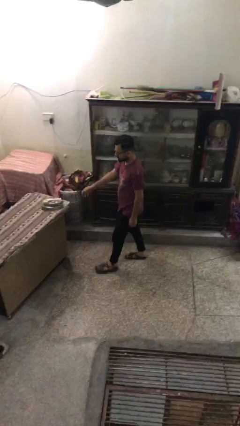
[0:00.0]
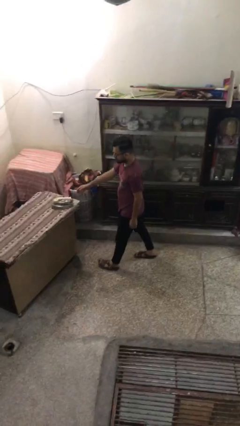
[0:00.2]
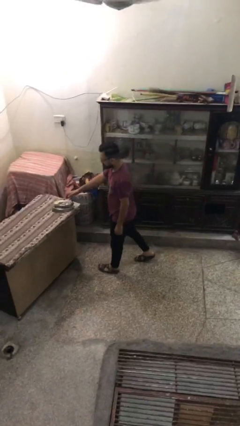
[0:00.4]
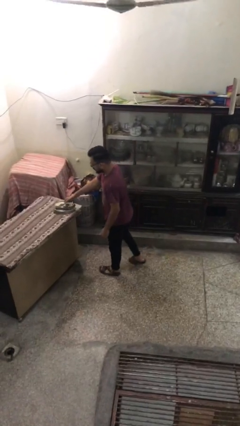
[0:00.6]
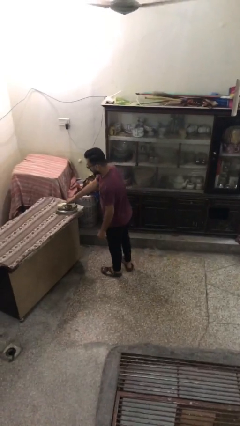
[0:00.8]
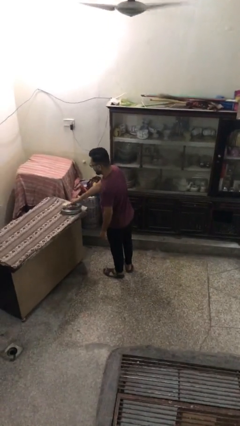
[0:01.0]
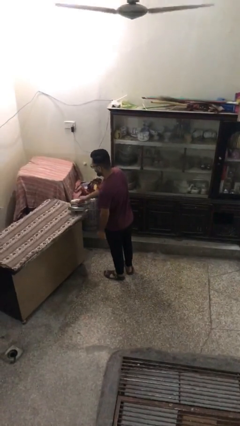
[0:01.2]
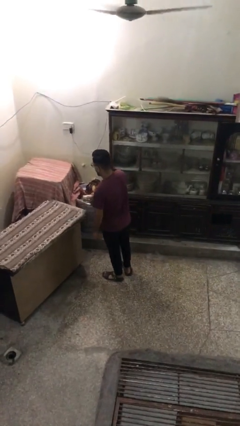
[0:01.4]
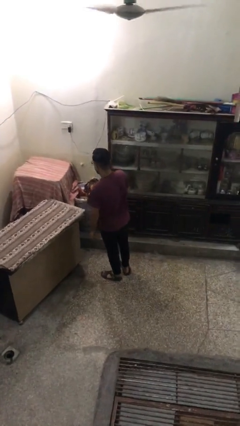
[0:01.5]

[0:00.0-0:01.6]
person picks up object from table

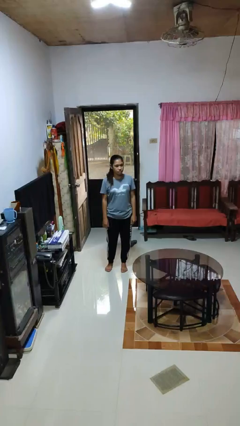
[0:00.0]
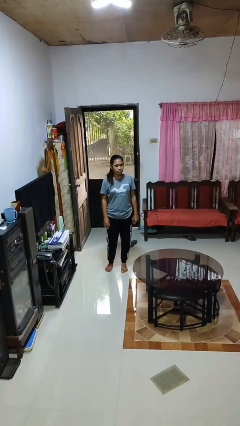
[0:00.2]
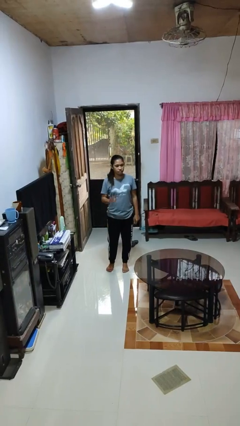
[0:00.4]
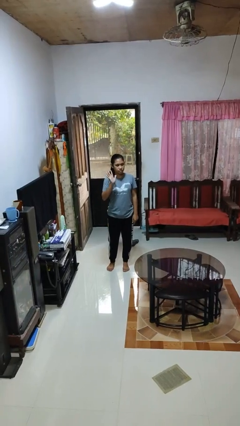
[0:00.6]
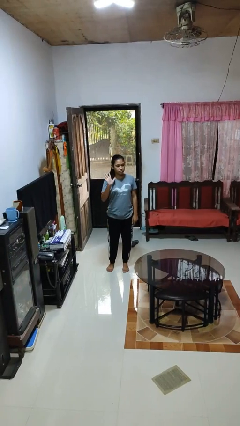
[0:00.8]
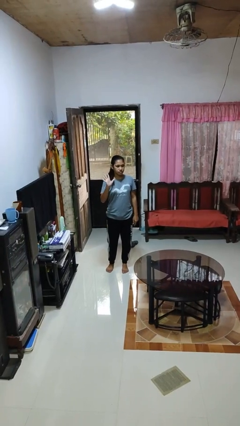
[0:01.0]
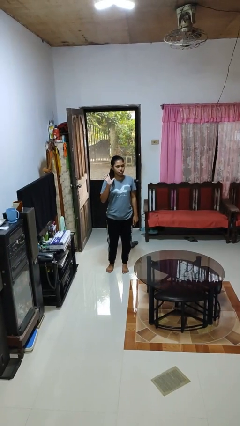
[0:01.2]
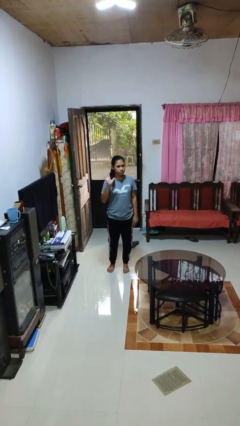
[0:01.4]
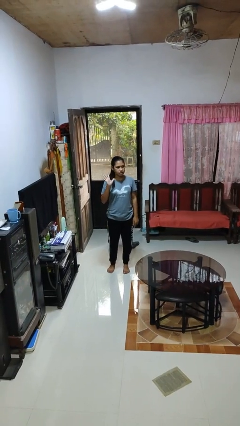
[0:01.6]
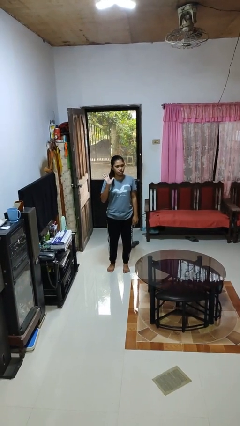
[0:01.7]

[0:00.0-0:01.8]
person gestures number five

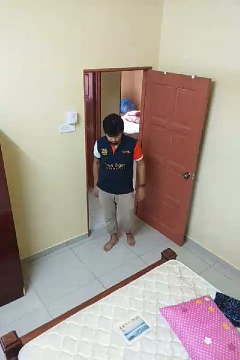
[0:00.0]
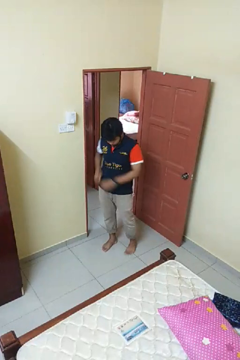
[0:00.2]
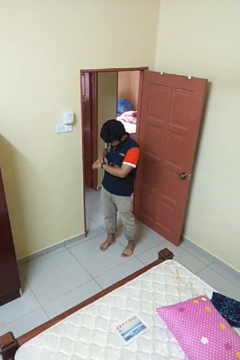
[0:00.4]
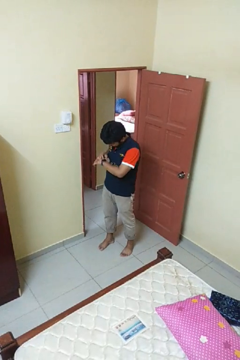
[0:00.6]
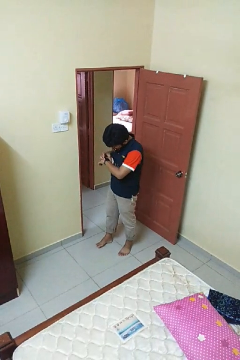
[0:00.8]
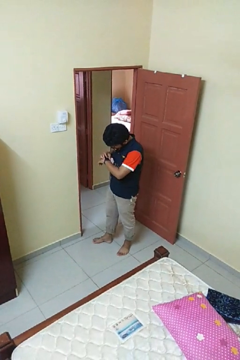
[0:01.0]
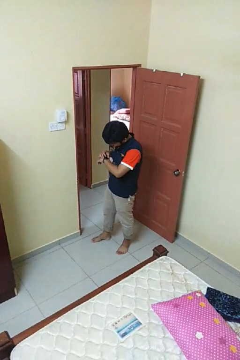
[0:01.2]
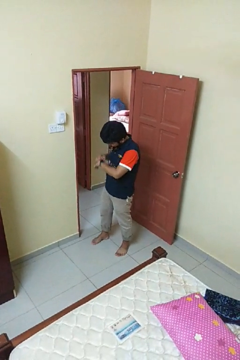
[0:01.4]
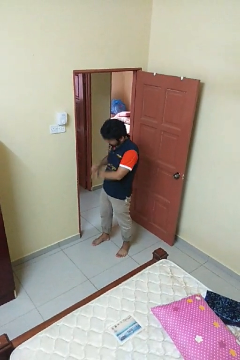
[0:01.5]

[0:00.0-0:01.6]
person looks at wristwatch

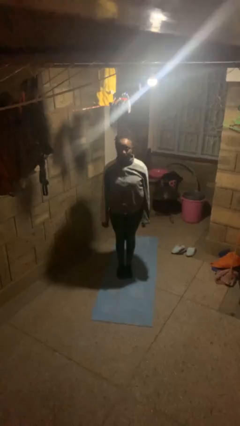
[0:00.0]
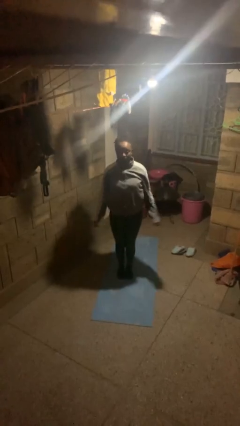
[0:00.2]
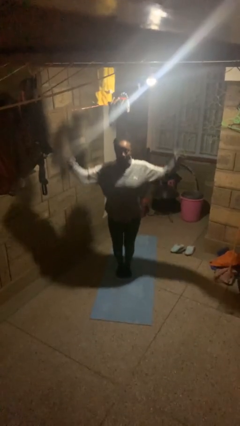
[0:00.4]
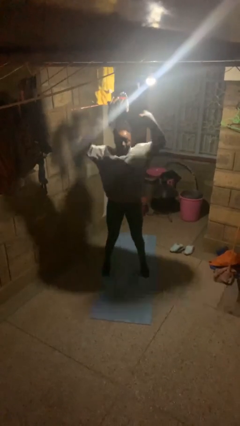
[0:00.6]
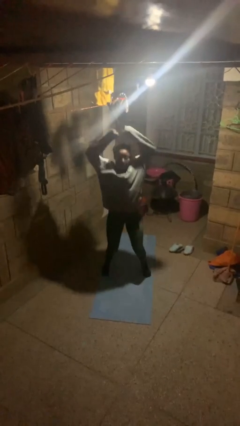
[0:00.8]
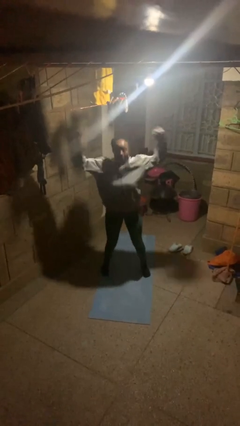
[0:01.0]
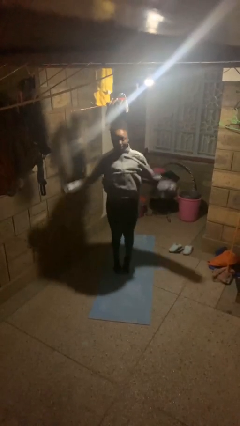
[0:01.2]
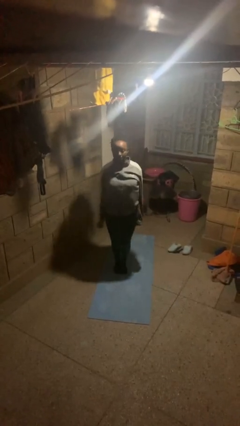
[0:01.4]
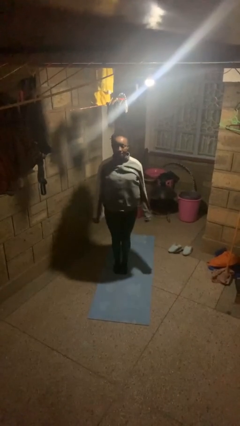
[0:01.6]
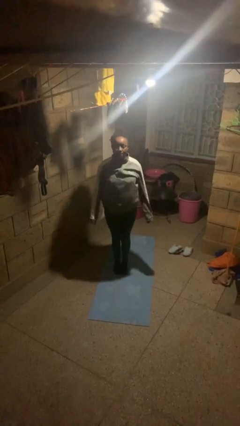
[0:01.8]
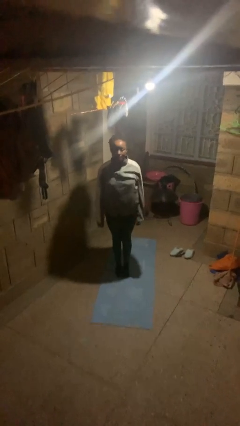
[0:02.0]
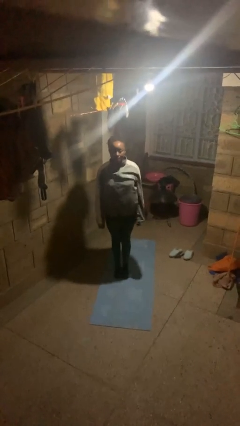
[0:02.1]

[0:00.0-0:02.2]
person exercises with jumping jacks

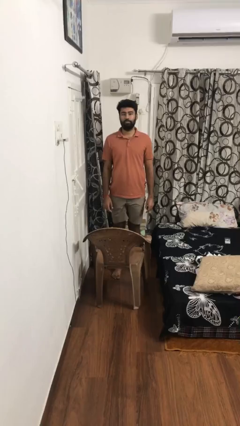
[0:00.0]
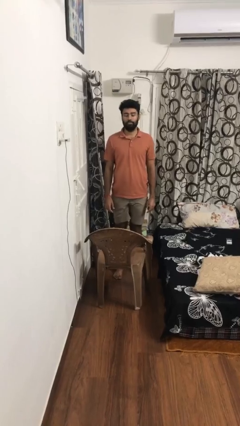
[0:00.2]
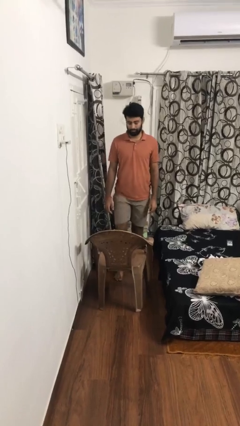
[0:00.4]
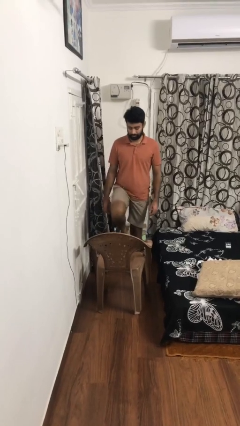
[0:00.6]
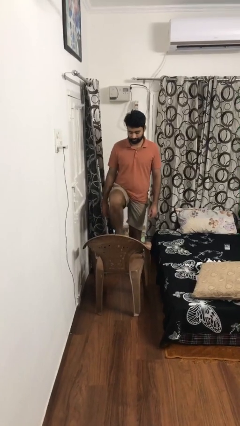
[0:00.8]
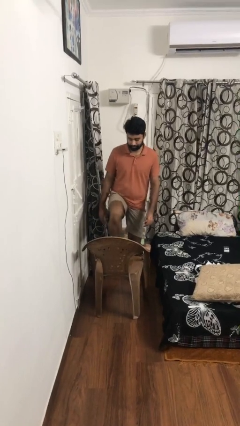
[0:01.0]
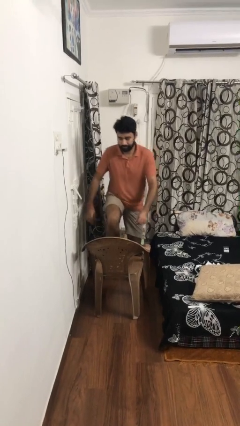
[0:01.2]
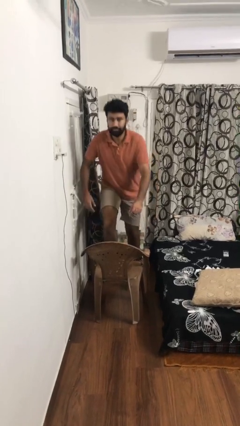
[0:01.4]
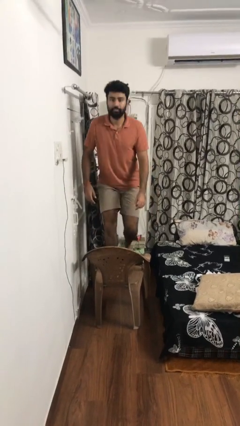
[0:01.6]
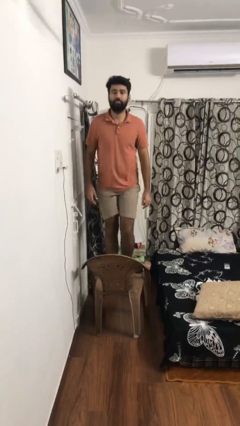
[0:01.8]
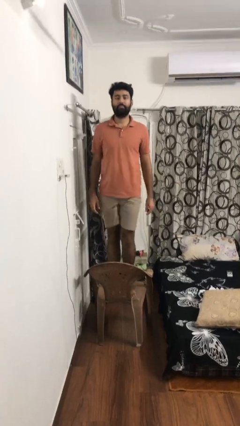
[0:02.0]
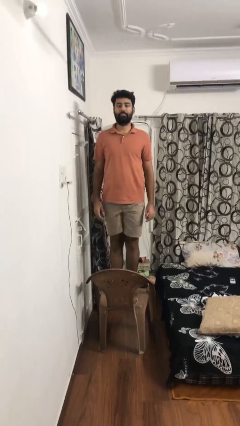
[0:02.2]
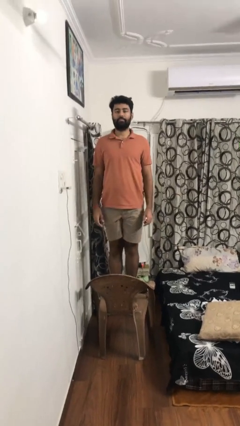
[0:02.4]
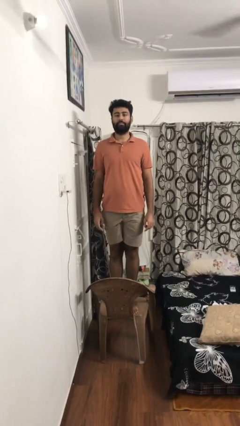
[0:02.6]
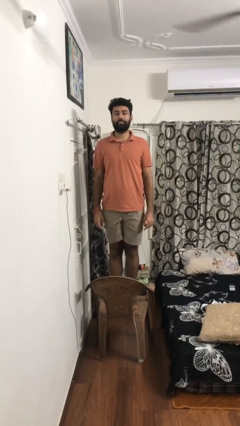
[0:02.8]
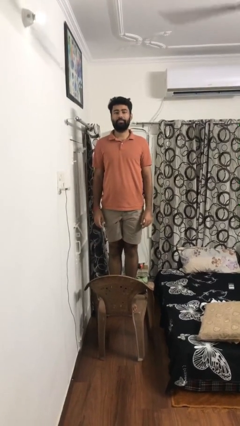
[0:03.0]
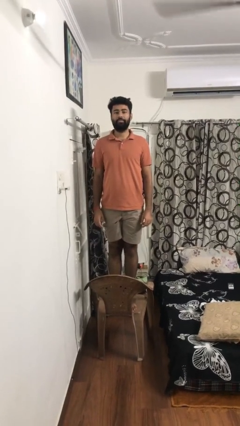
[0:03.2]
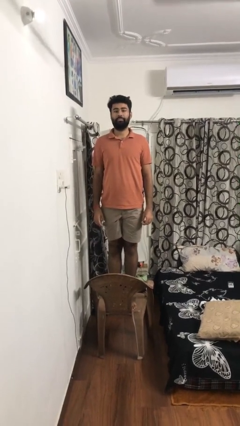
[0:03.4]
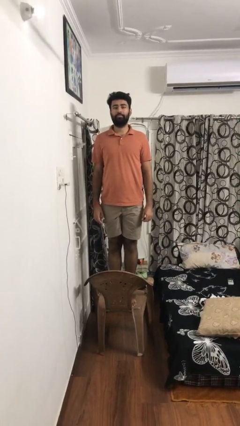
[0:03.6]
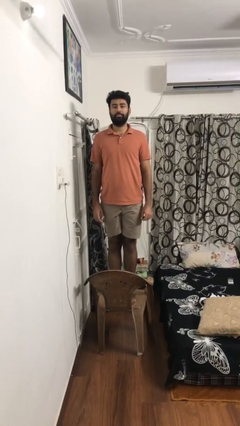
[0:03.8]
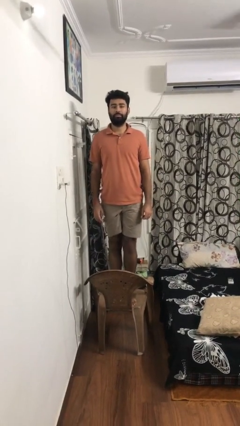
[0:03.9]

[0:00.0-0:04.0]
person climbs on chair

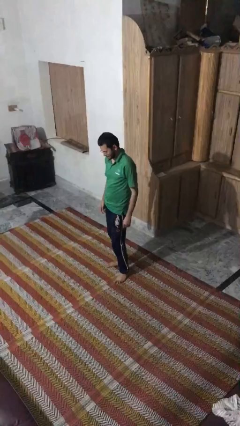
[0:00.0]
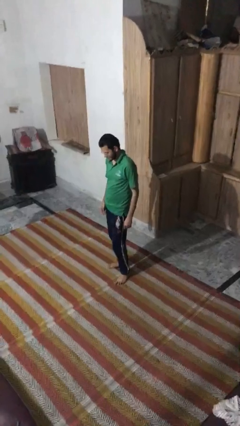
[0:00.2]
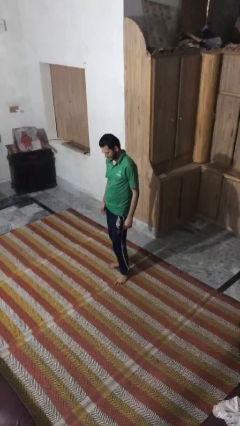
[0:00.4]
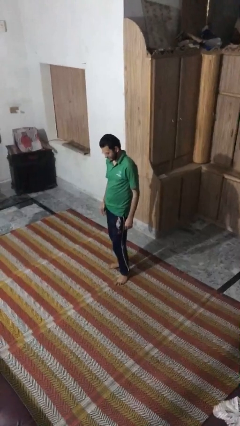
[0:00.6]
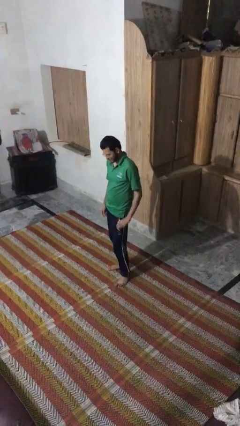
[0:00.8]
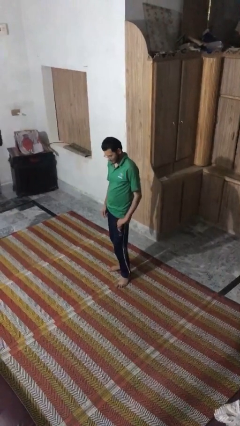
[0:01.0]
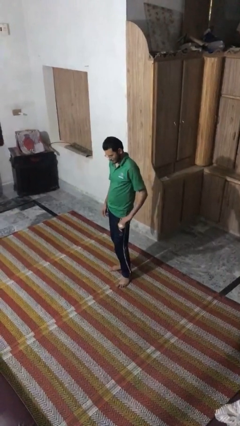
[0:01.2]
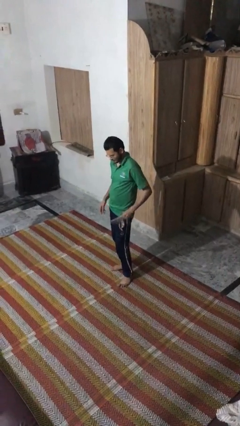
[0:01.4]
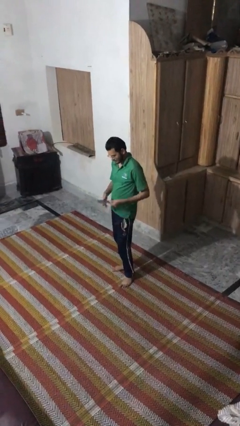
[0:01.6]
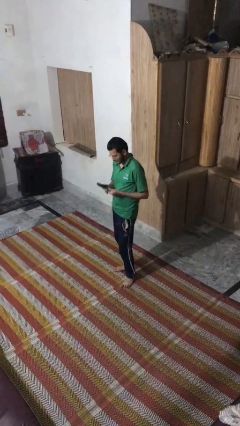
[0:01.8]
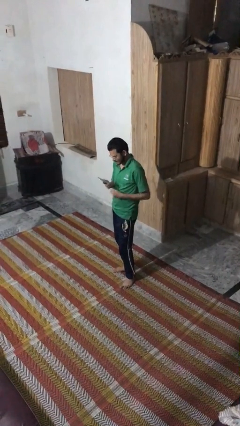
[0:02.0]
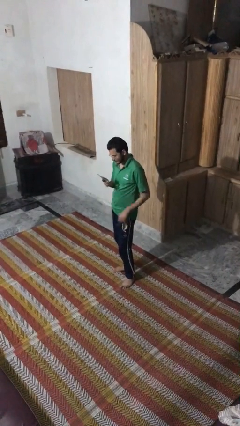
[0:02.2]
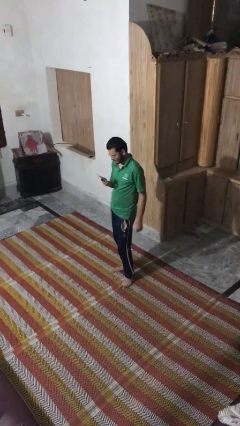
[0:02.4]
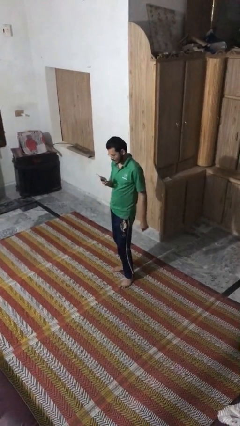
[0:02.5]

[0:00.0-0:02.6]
person takes phone from pocket

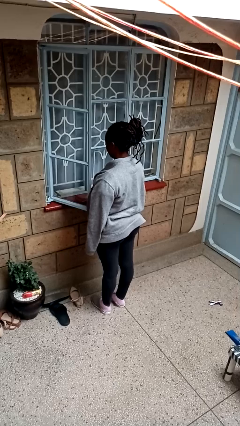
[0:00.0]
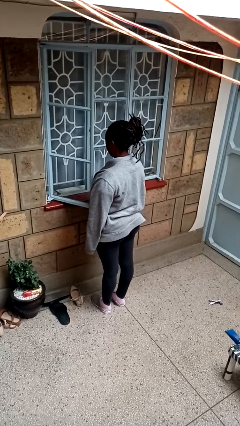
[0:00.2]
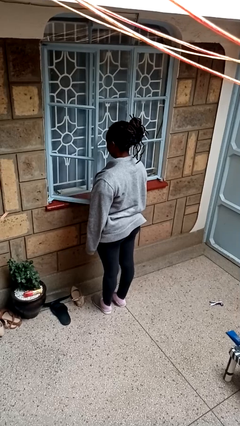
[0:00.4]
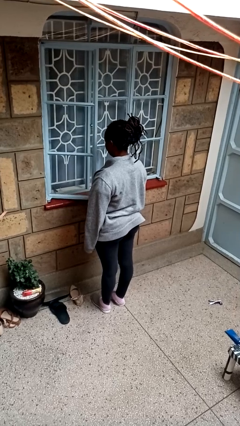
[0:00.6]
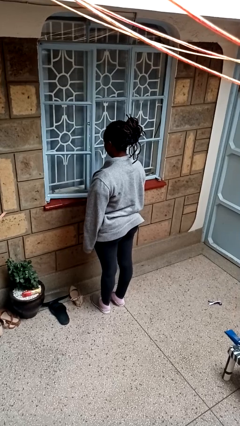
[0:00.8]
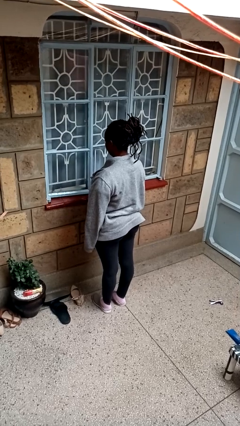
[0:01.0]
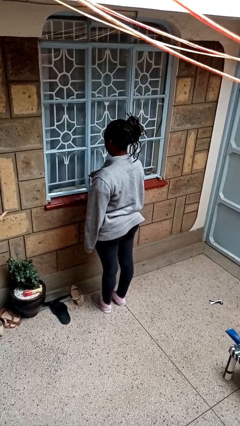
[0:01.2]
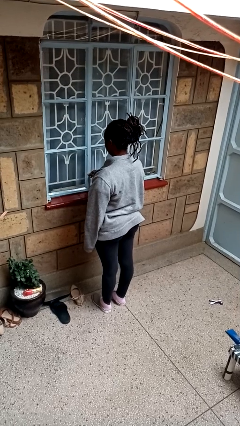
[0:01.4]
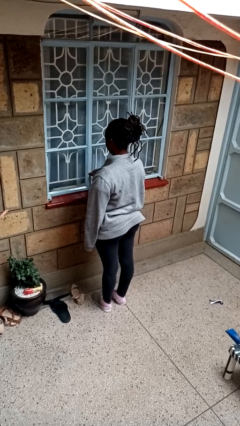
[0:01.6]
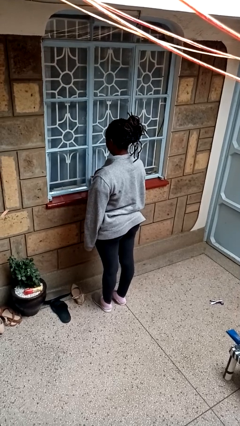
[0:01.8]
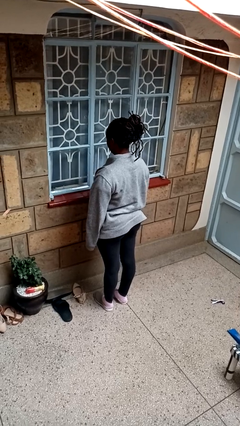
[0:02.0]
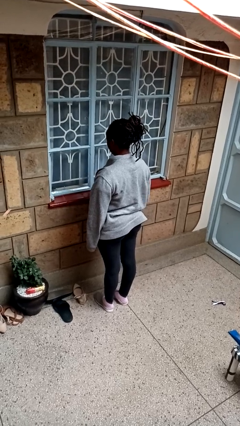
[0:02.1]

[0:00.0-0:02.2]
person closes home window

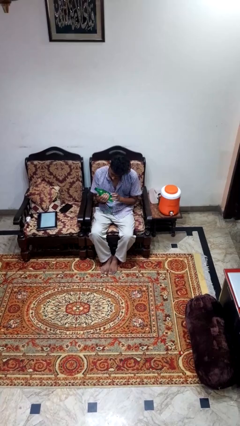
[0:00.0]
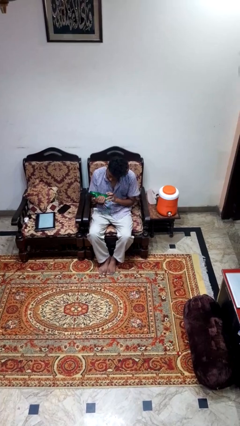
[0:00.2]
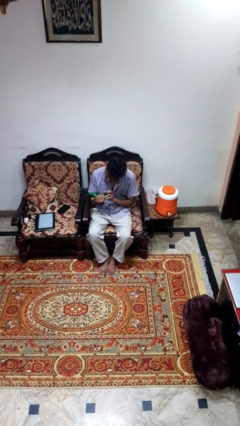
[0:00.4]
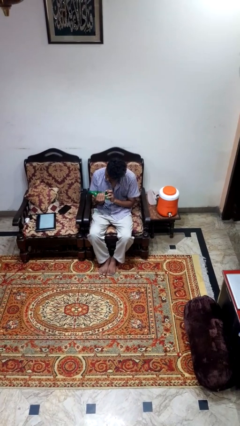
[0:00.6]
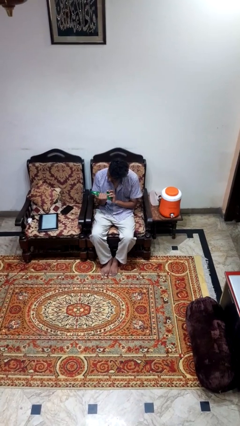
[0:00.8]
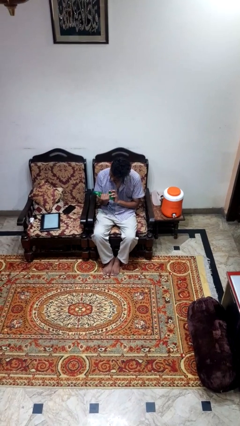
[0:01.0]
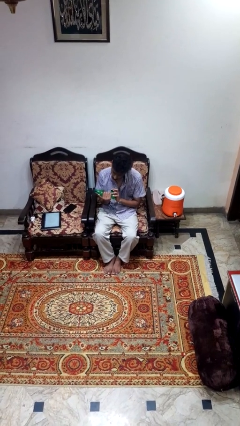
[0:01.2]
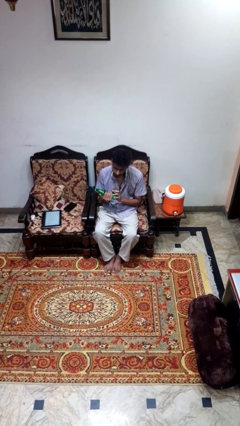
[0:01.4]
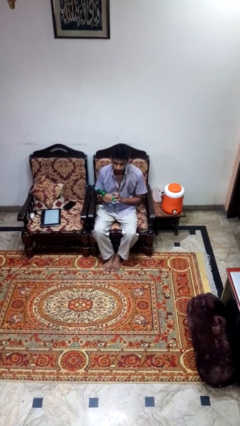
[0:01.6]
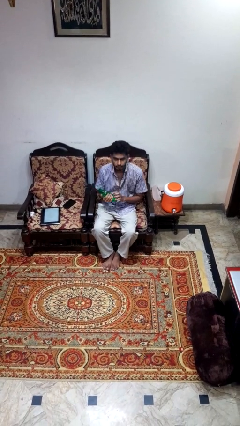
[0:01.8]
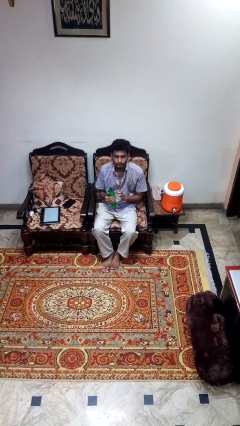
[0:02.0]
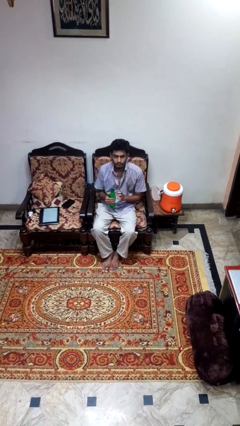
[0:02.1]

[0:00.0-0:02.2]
person squeezes object
